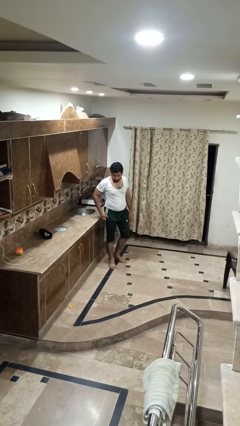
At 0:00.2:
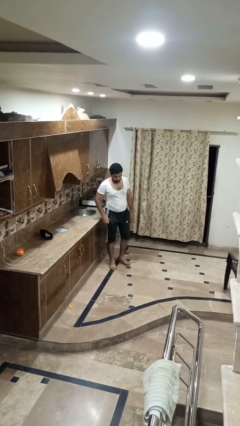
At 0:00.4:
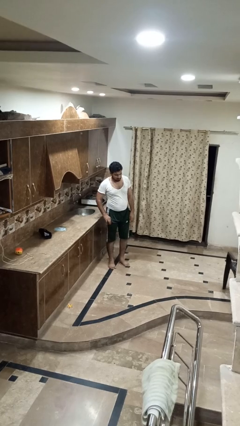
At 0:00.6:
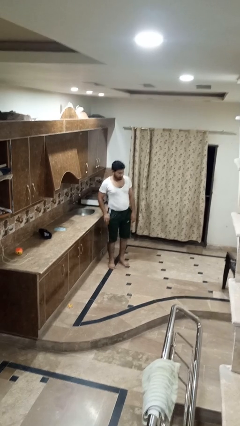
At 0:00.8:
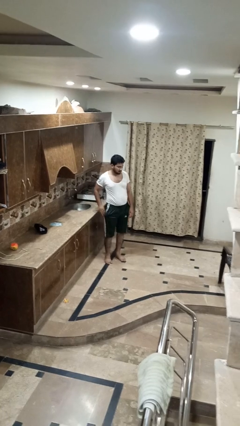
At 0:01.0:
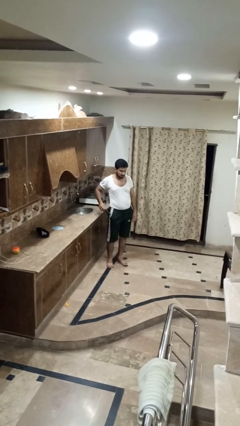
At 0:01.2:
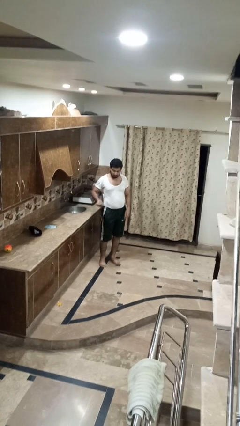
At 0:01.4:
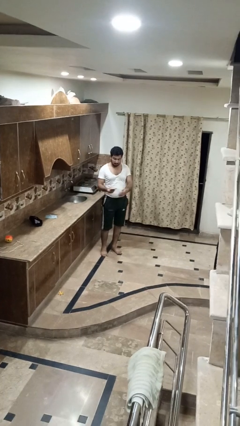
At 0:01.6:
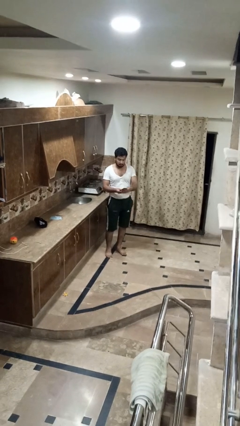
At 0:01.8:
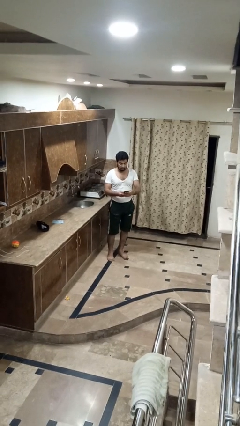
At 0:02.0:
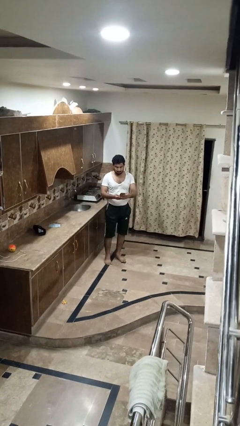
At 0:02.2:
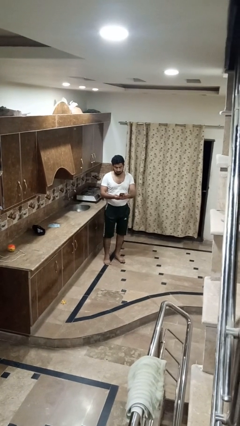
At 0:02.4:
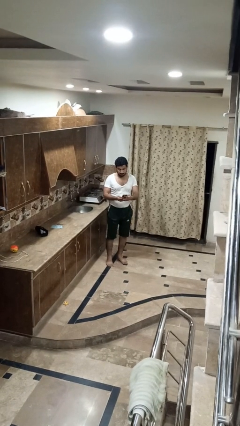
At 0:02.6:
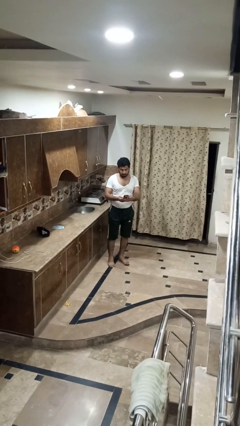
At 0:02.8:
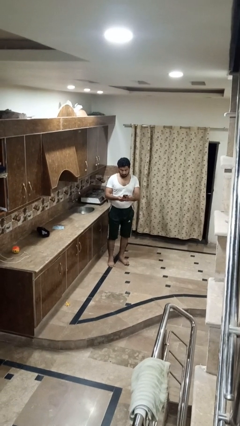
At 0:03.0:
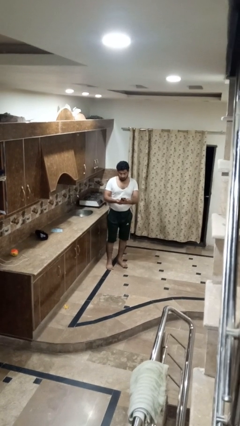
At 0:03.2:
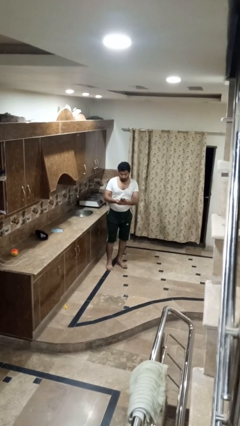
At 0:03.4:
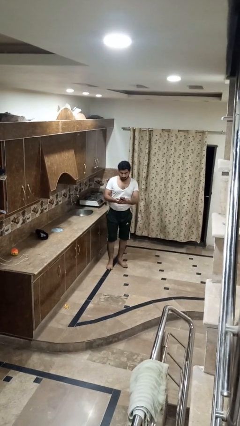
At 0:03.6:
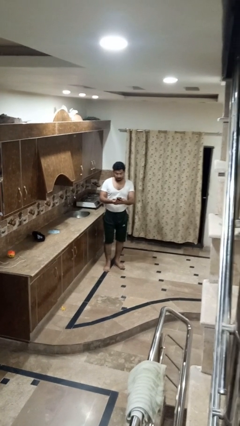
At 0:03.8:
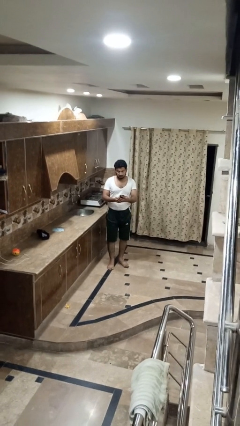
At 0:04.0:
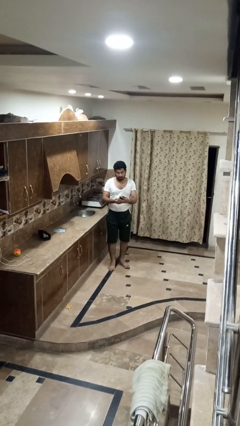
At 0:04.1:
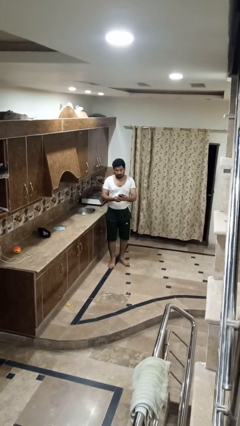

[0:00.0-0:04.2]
person takes phone from pocket

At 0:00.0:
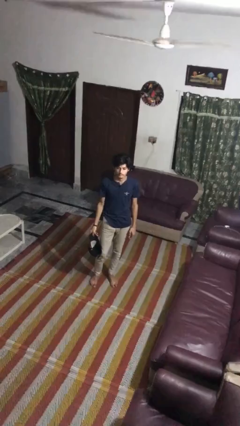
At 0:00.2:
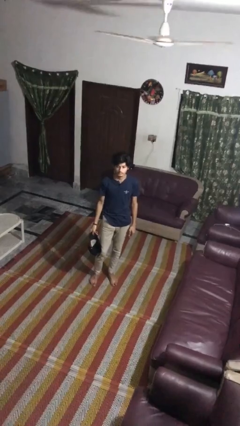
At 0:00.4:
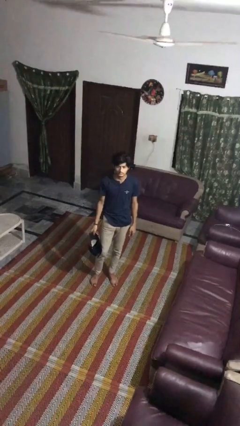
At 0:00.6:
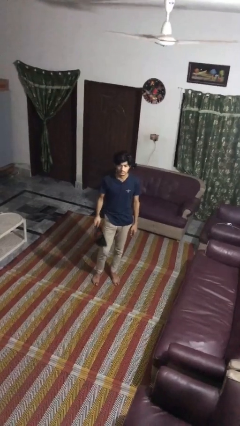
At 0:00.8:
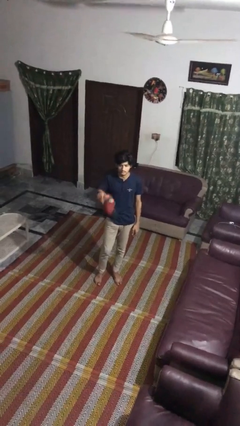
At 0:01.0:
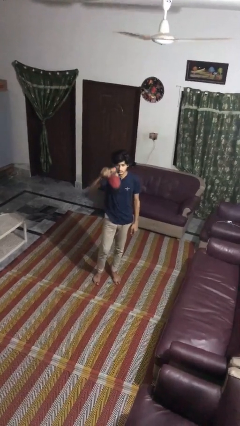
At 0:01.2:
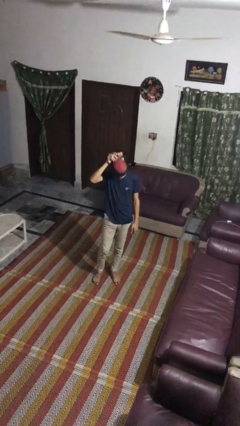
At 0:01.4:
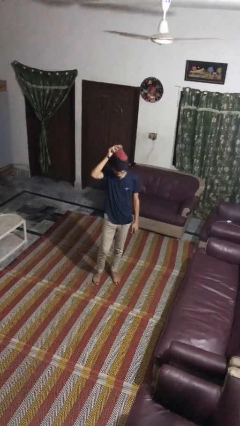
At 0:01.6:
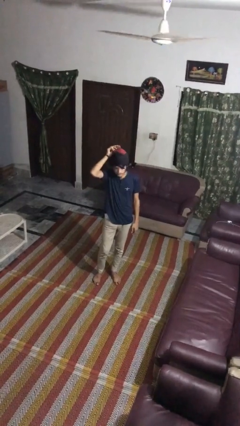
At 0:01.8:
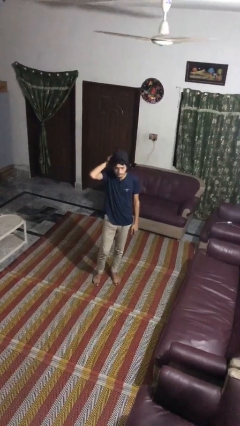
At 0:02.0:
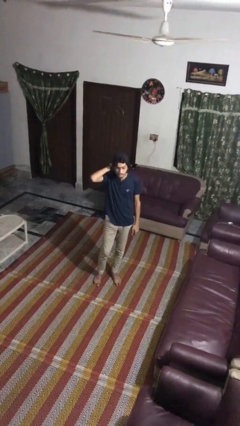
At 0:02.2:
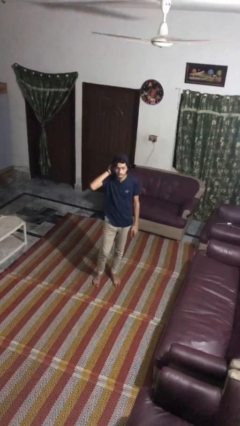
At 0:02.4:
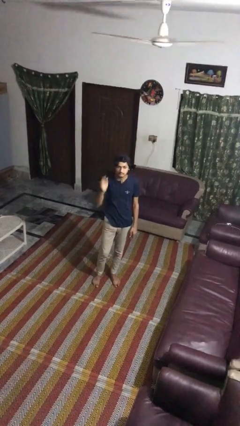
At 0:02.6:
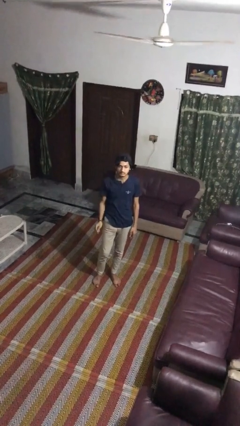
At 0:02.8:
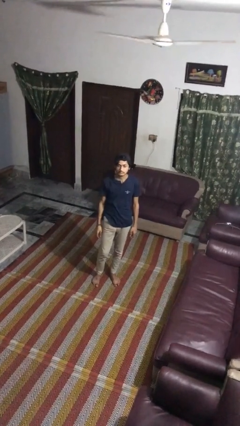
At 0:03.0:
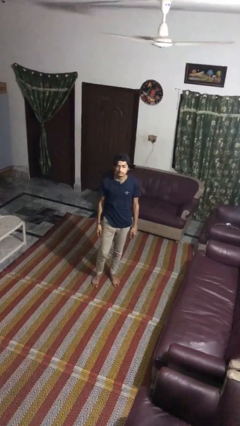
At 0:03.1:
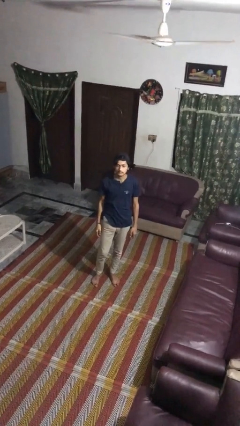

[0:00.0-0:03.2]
person puts on hat

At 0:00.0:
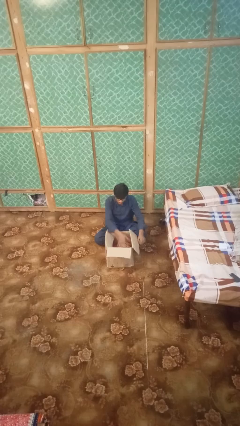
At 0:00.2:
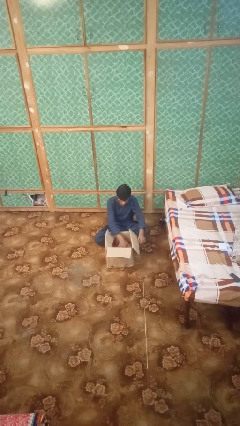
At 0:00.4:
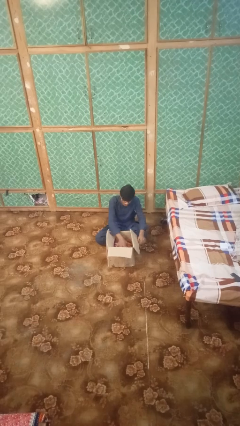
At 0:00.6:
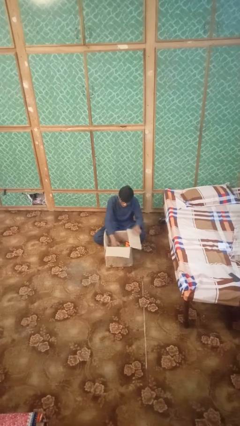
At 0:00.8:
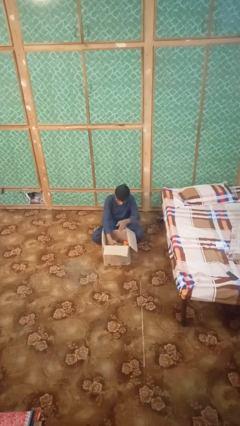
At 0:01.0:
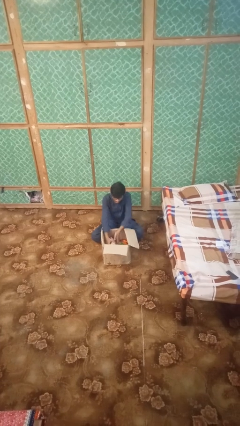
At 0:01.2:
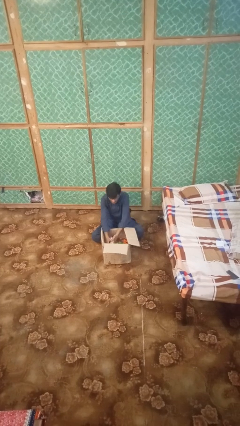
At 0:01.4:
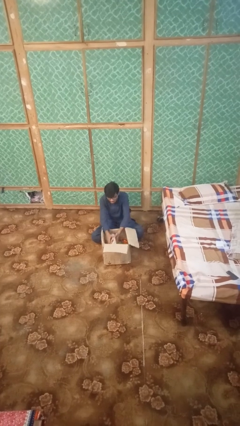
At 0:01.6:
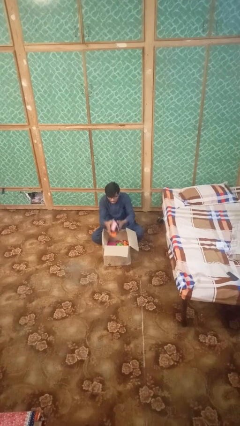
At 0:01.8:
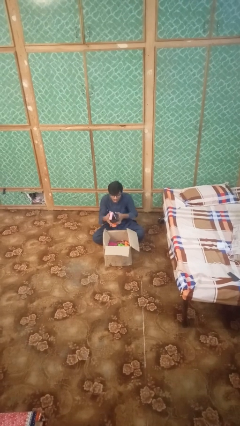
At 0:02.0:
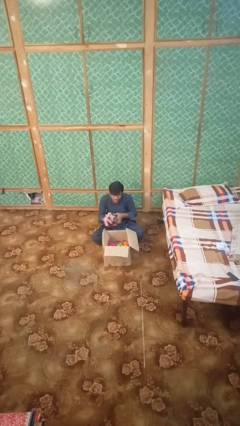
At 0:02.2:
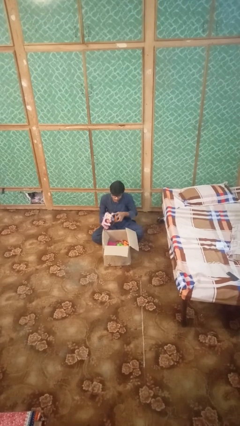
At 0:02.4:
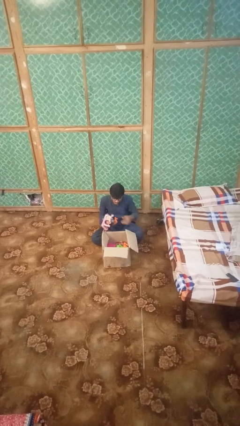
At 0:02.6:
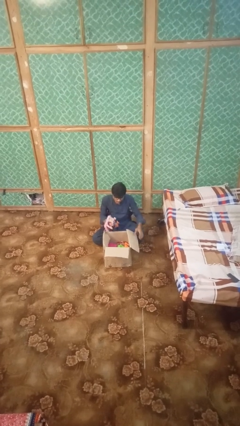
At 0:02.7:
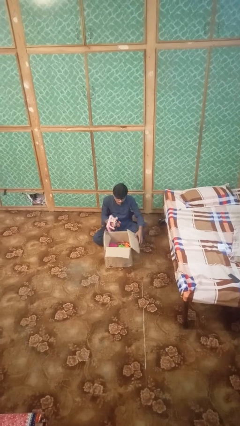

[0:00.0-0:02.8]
person takes object from box

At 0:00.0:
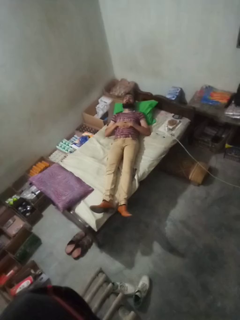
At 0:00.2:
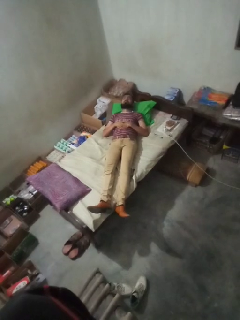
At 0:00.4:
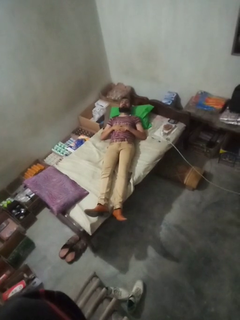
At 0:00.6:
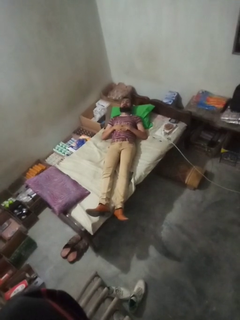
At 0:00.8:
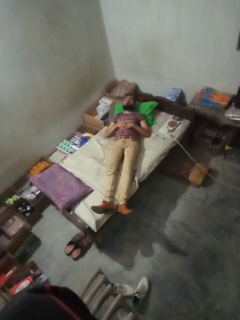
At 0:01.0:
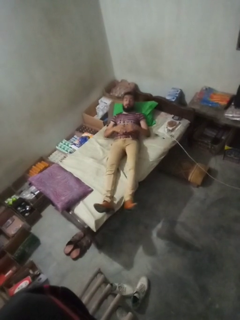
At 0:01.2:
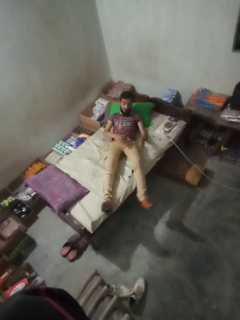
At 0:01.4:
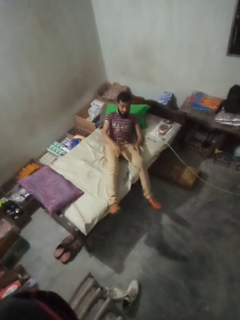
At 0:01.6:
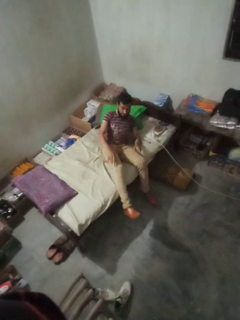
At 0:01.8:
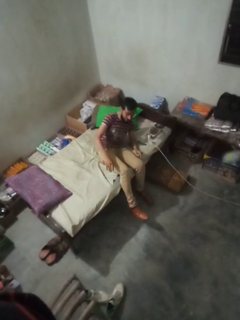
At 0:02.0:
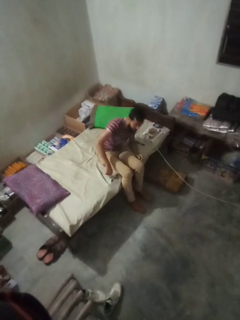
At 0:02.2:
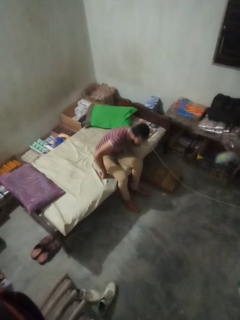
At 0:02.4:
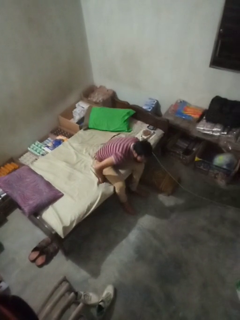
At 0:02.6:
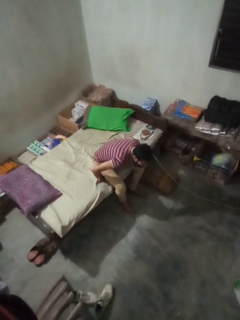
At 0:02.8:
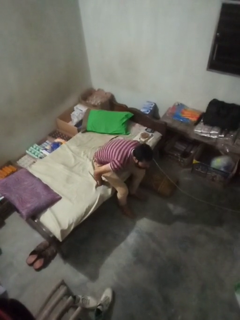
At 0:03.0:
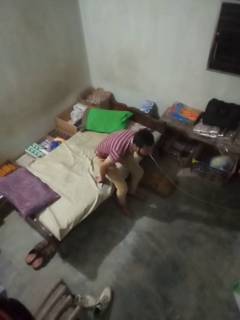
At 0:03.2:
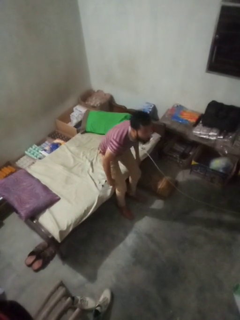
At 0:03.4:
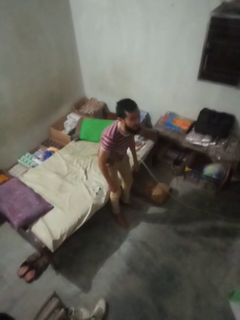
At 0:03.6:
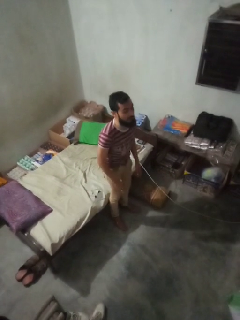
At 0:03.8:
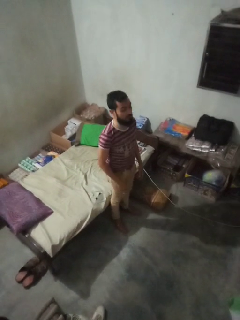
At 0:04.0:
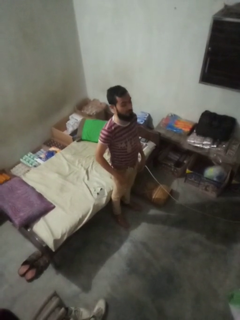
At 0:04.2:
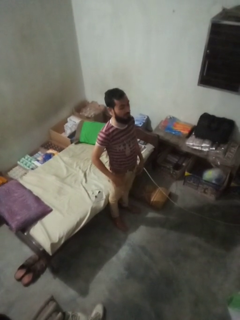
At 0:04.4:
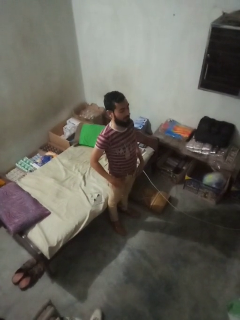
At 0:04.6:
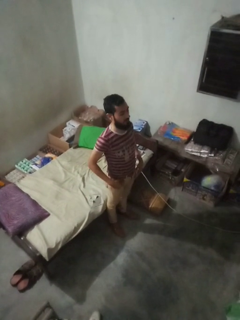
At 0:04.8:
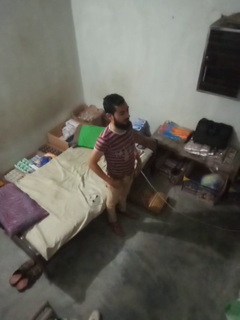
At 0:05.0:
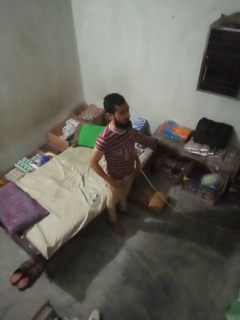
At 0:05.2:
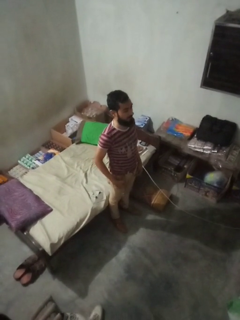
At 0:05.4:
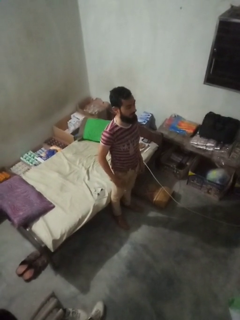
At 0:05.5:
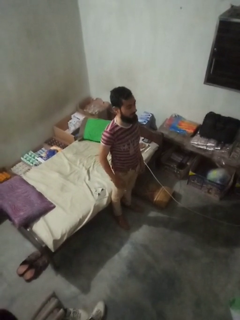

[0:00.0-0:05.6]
person stands up

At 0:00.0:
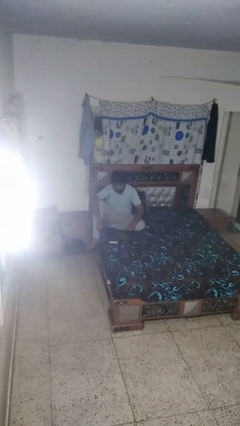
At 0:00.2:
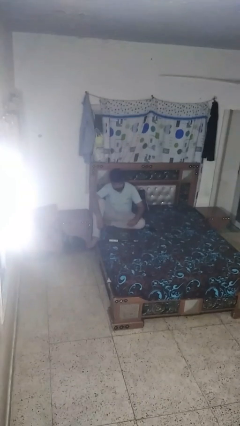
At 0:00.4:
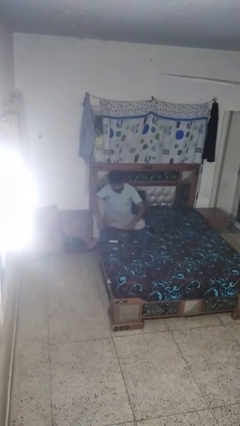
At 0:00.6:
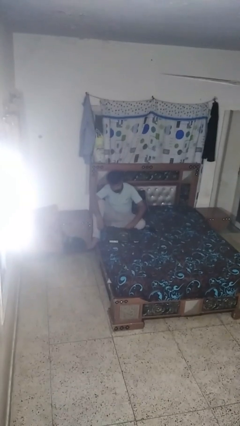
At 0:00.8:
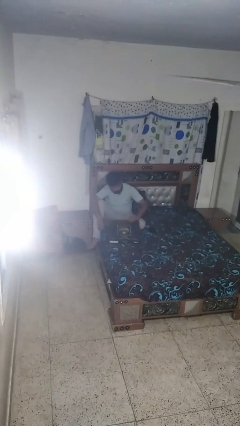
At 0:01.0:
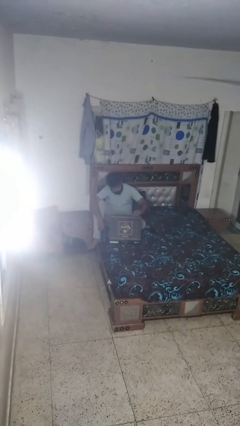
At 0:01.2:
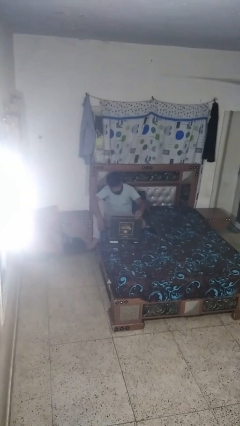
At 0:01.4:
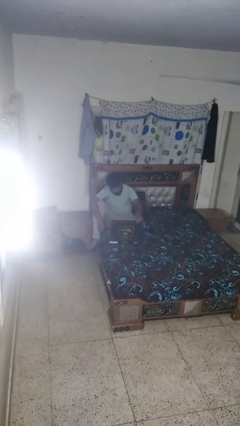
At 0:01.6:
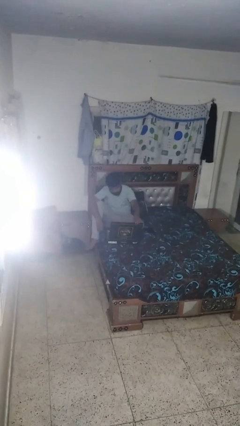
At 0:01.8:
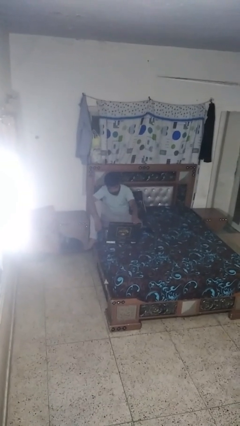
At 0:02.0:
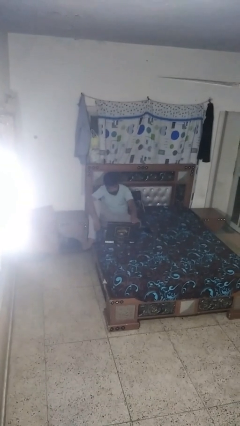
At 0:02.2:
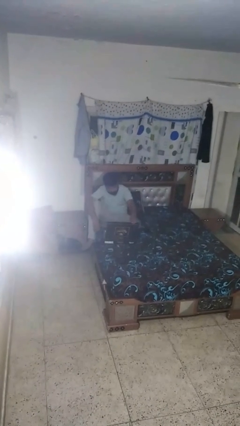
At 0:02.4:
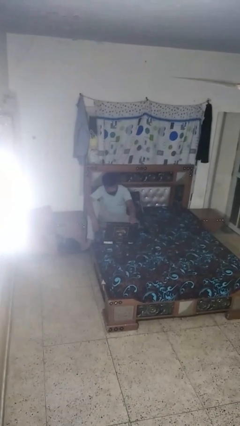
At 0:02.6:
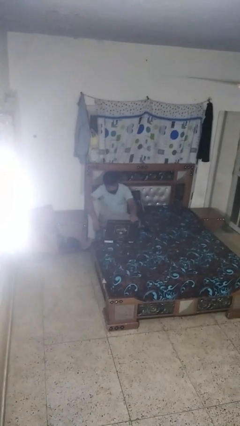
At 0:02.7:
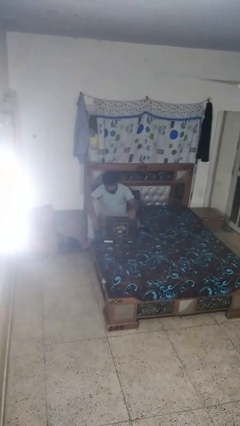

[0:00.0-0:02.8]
person opens laptop
